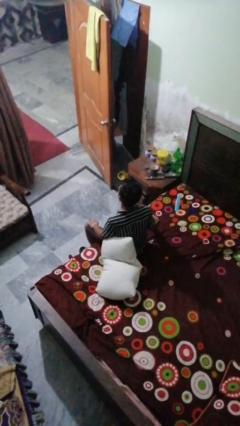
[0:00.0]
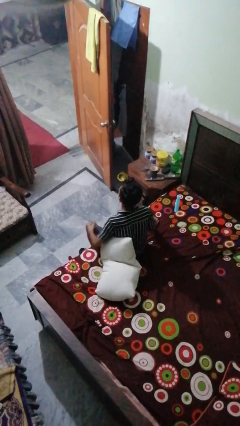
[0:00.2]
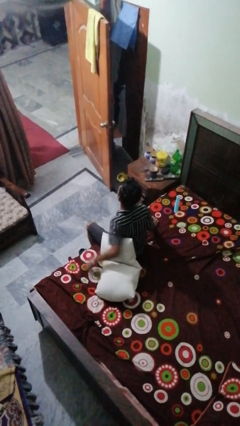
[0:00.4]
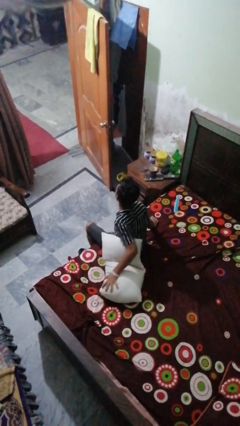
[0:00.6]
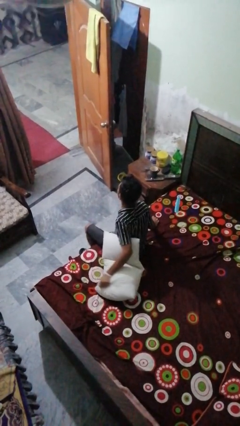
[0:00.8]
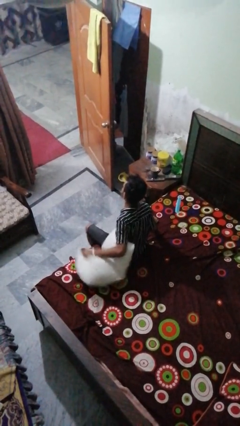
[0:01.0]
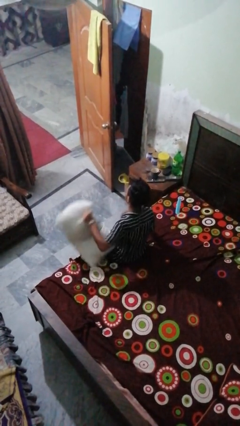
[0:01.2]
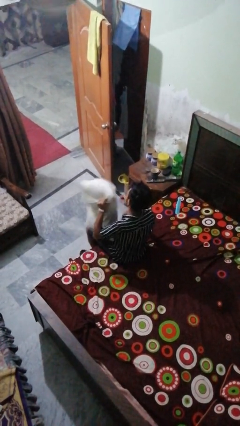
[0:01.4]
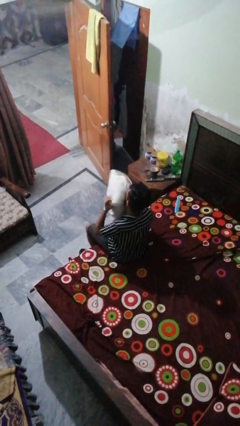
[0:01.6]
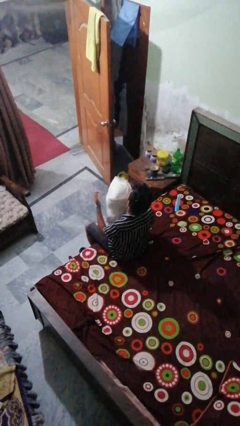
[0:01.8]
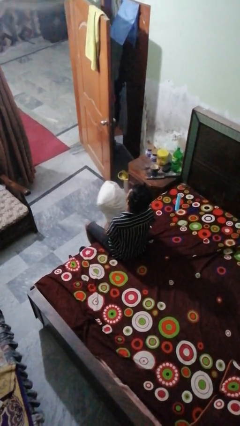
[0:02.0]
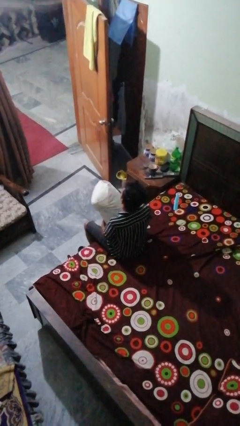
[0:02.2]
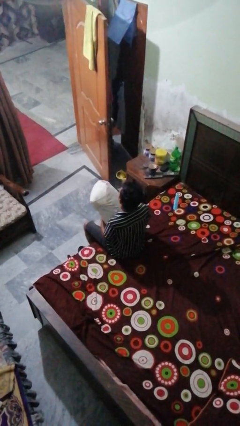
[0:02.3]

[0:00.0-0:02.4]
person picks up object from bed

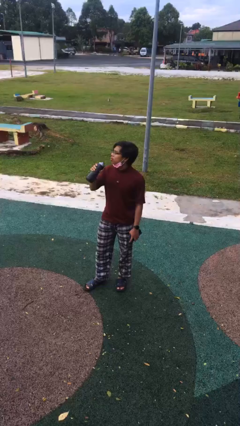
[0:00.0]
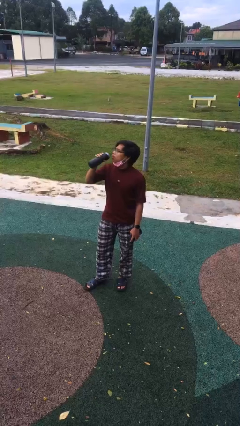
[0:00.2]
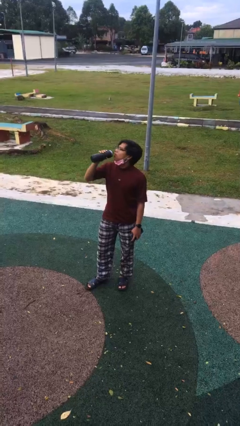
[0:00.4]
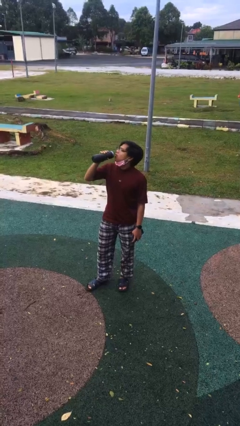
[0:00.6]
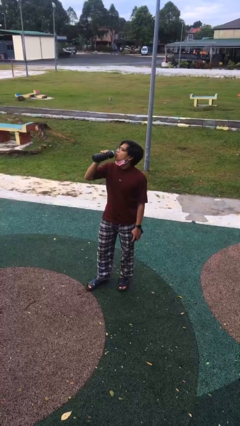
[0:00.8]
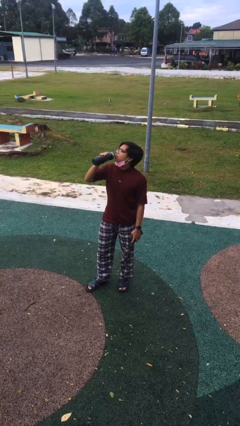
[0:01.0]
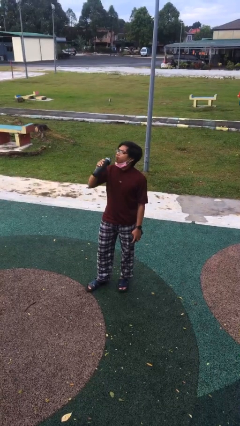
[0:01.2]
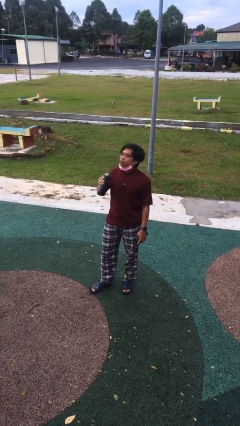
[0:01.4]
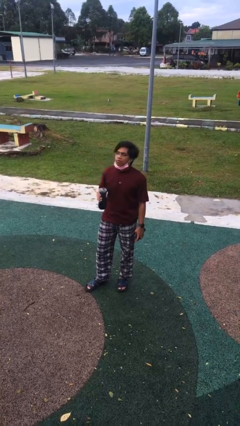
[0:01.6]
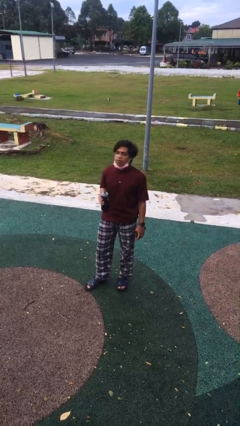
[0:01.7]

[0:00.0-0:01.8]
person drinks from bottle

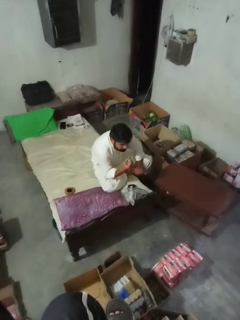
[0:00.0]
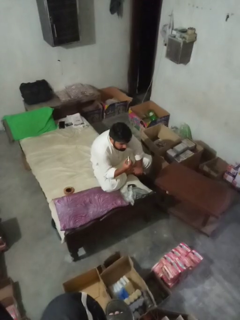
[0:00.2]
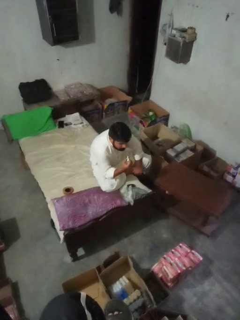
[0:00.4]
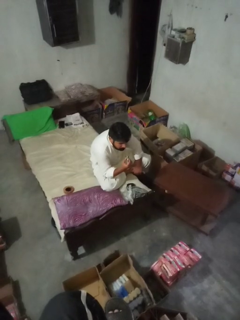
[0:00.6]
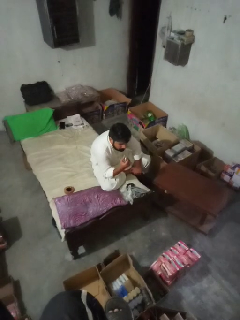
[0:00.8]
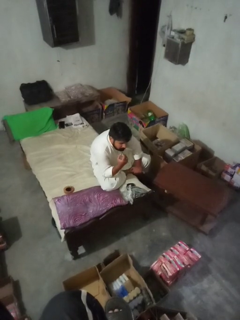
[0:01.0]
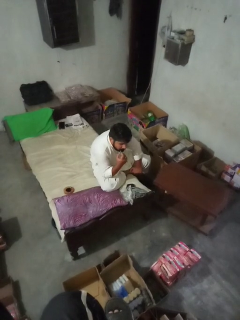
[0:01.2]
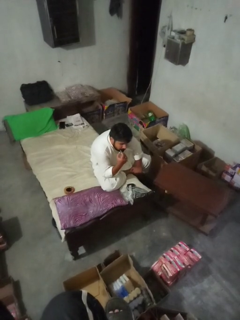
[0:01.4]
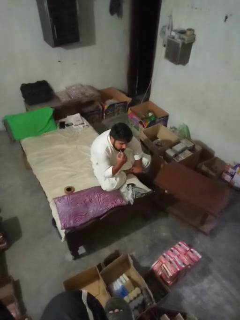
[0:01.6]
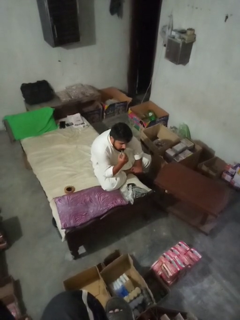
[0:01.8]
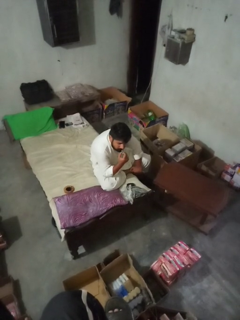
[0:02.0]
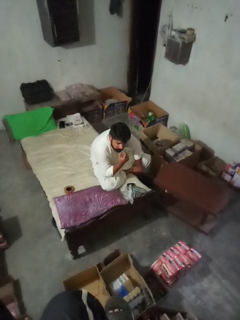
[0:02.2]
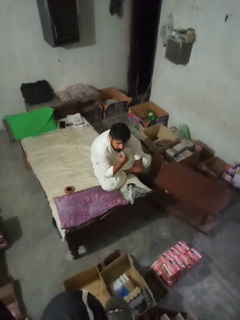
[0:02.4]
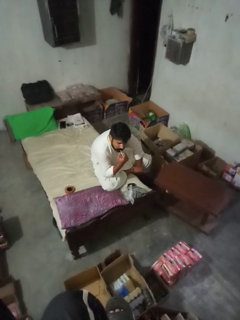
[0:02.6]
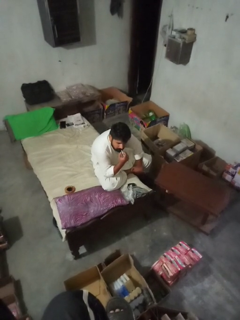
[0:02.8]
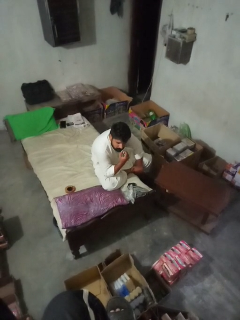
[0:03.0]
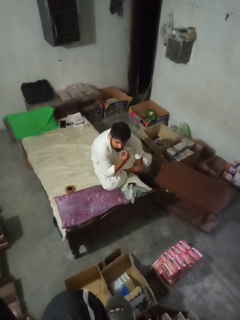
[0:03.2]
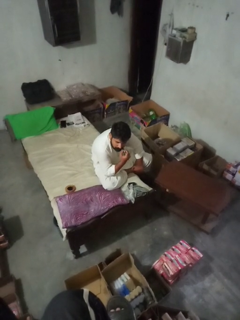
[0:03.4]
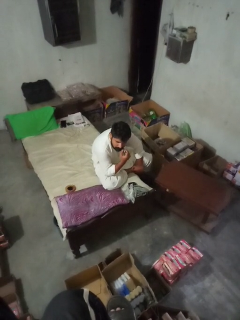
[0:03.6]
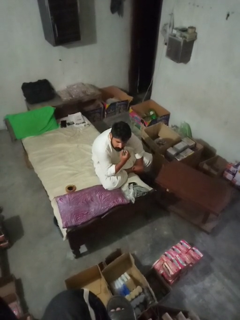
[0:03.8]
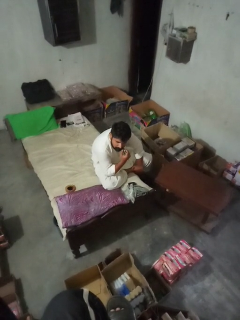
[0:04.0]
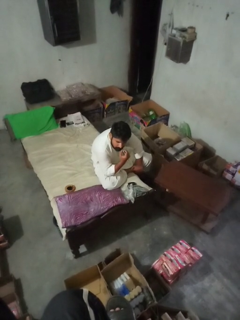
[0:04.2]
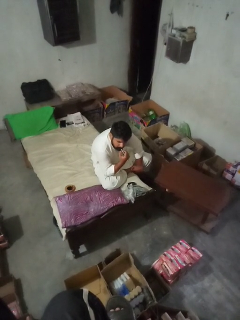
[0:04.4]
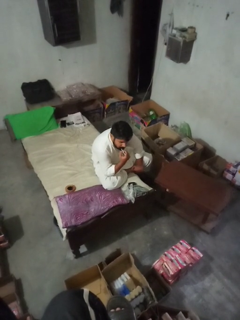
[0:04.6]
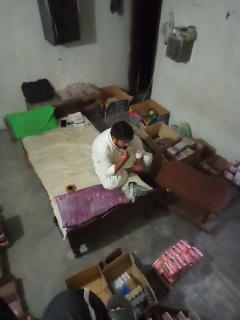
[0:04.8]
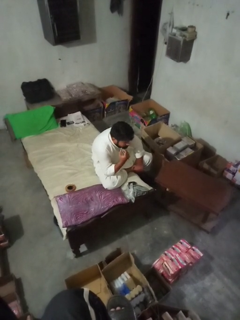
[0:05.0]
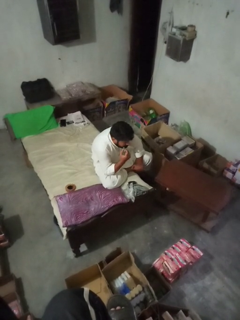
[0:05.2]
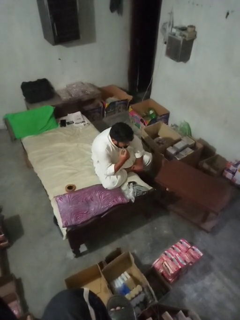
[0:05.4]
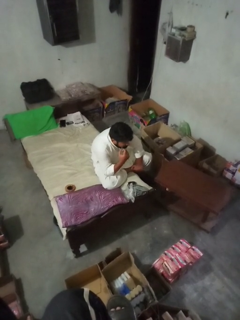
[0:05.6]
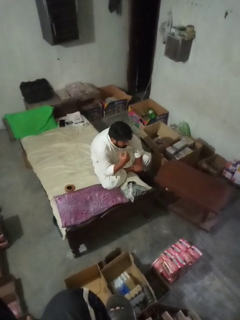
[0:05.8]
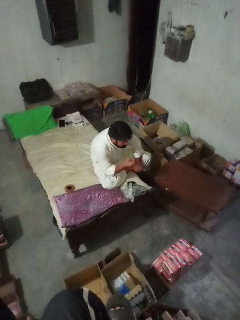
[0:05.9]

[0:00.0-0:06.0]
person applies lip makeup

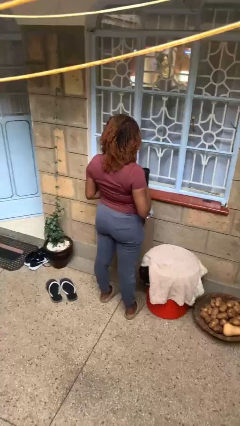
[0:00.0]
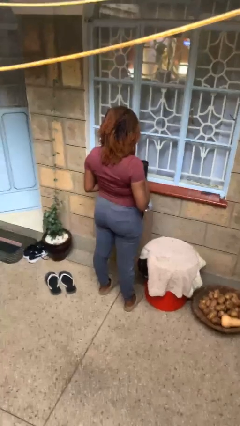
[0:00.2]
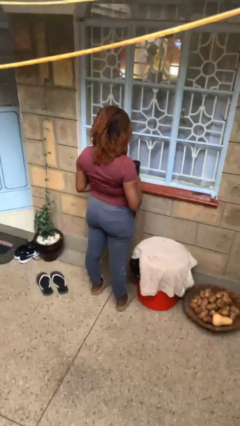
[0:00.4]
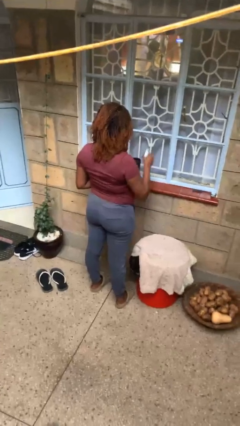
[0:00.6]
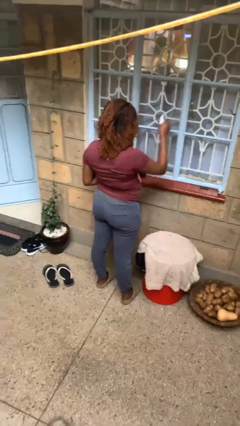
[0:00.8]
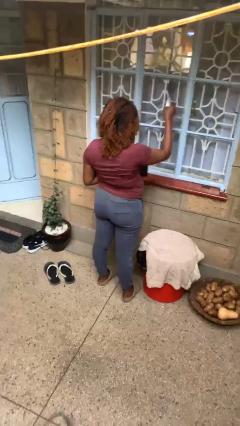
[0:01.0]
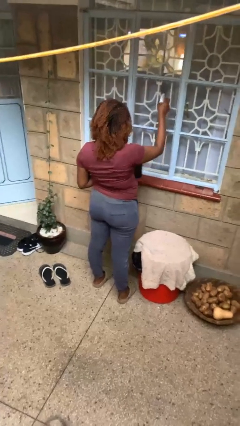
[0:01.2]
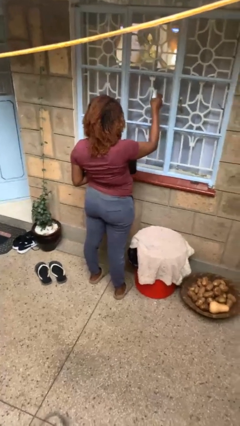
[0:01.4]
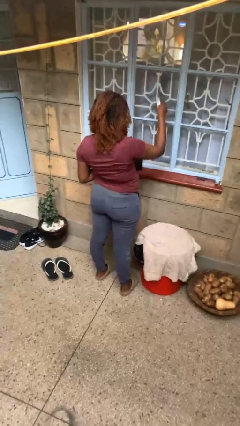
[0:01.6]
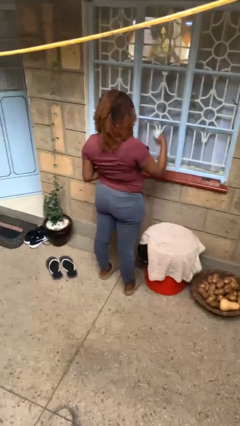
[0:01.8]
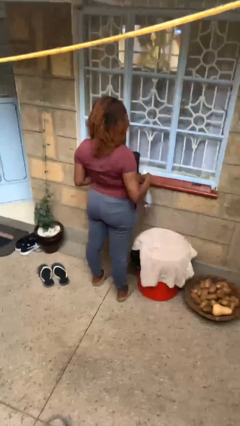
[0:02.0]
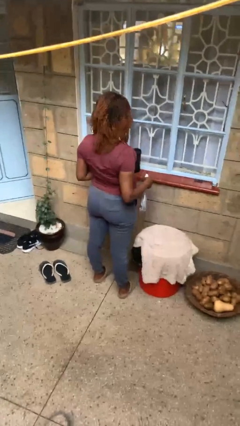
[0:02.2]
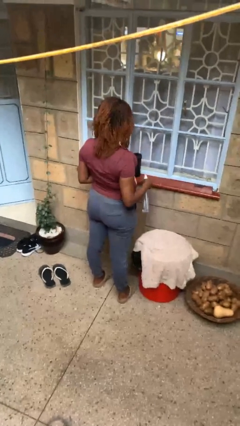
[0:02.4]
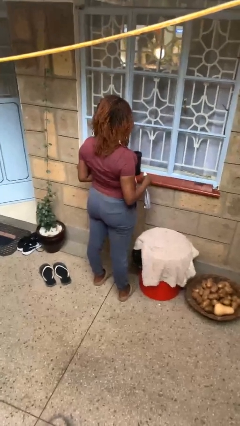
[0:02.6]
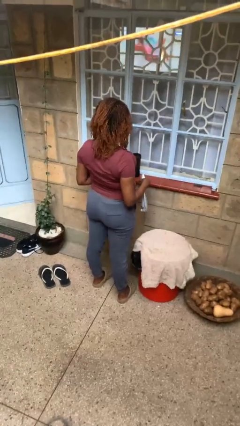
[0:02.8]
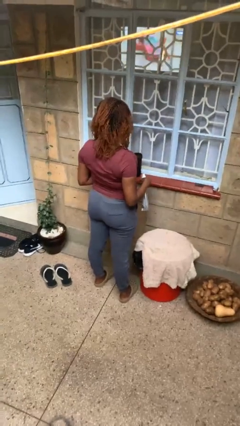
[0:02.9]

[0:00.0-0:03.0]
person sprays from bottle

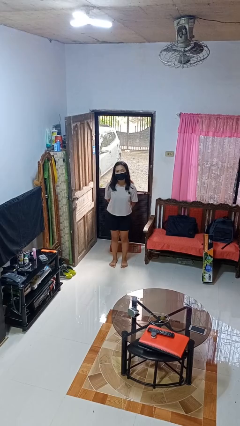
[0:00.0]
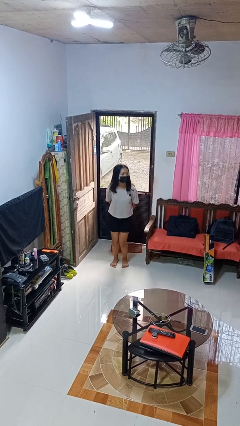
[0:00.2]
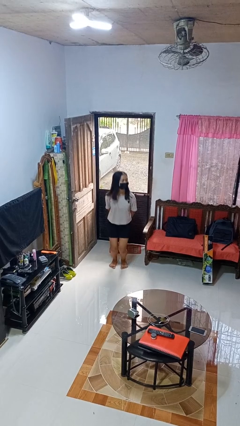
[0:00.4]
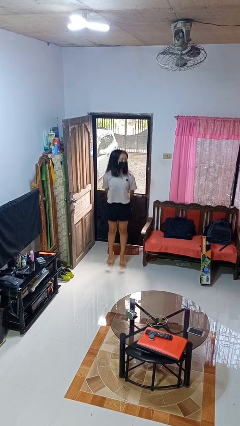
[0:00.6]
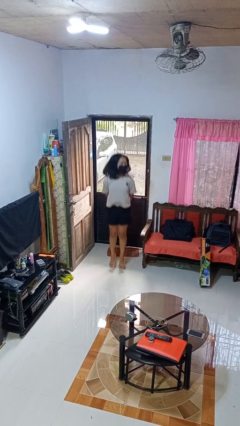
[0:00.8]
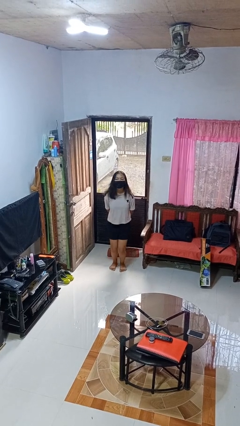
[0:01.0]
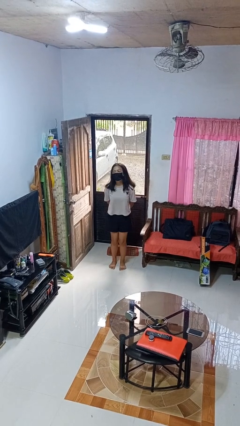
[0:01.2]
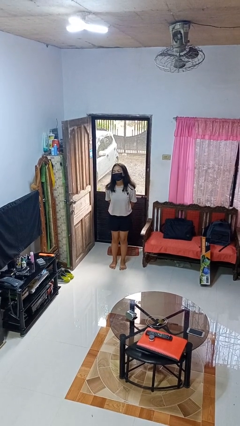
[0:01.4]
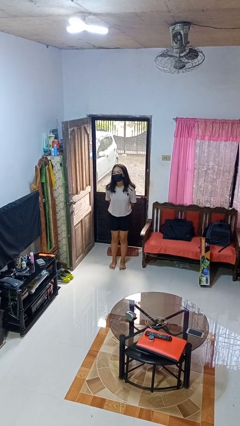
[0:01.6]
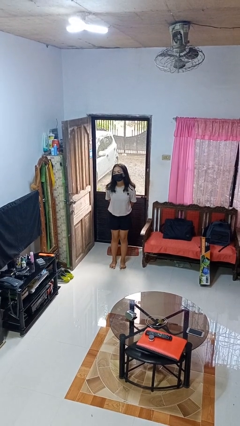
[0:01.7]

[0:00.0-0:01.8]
person jumps

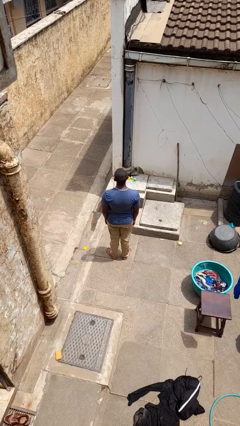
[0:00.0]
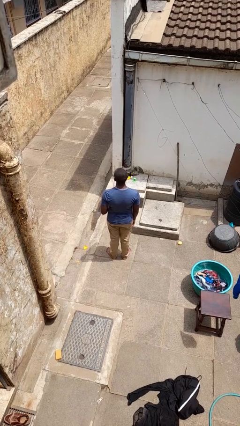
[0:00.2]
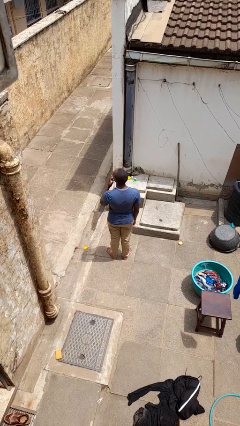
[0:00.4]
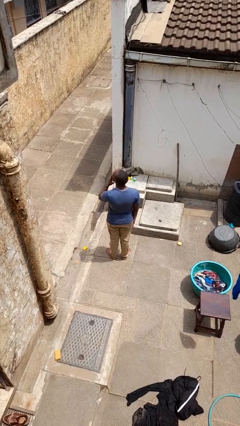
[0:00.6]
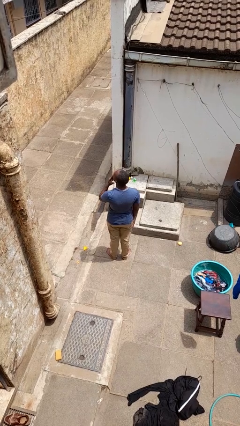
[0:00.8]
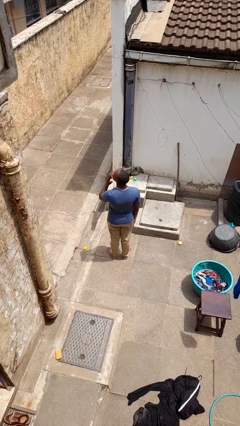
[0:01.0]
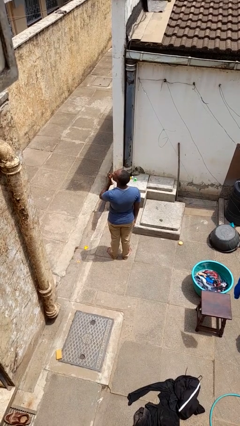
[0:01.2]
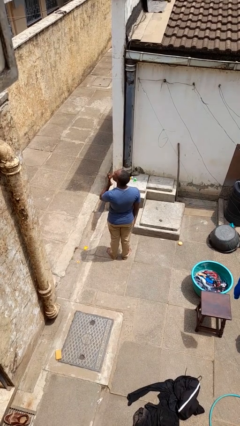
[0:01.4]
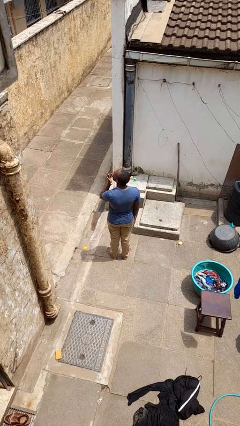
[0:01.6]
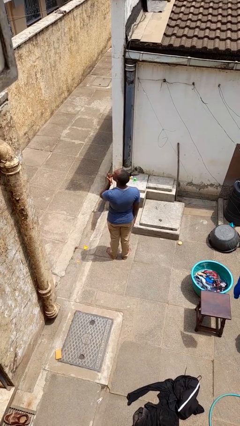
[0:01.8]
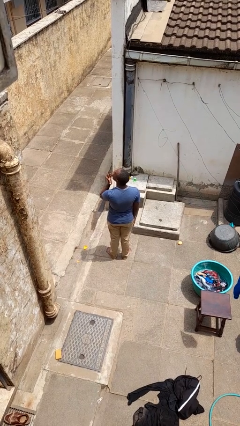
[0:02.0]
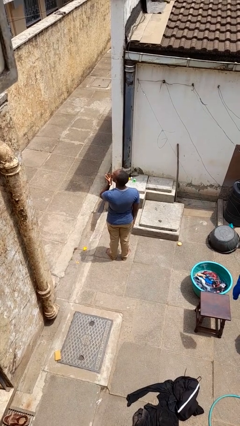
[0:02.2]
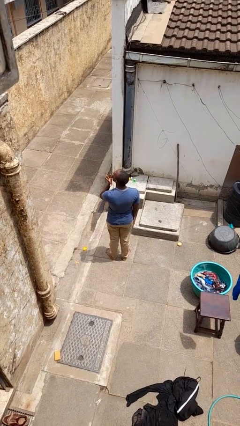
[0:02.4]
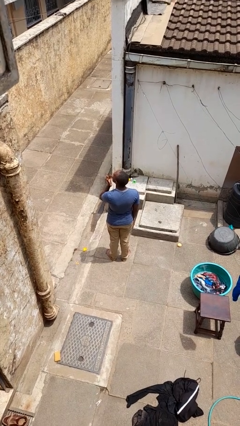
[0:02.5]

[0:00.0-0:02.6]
person licks fingers

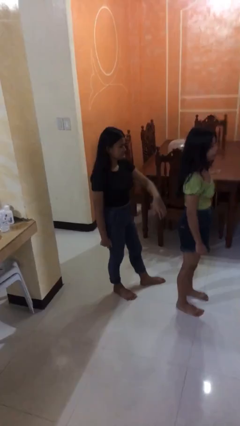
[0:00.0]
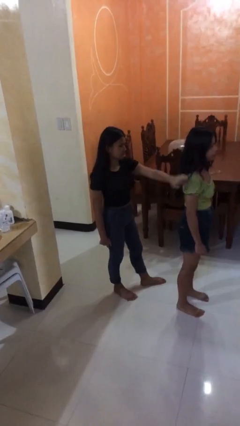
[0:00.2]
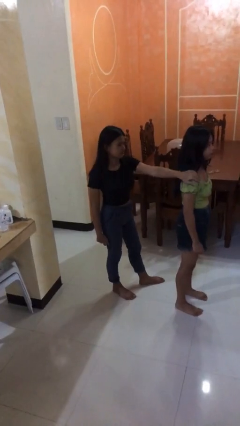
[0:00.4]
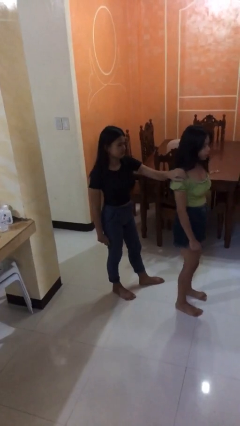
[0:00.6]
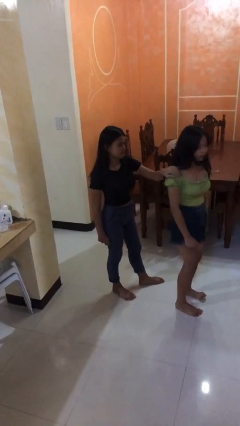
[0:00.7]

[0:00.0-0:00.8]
person grabs person by shoulder
